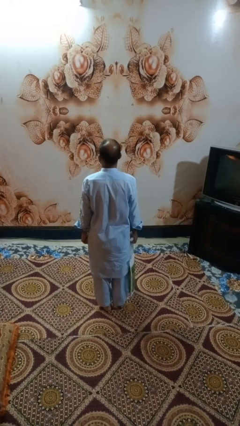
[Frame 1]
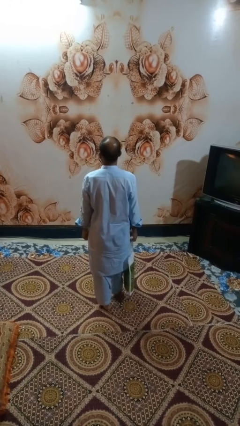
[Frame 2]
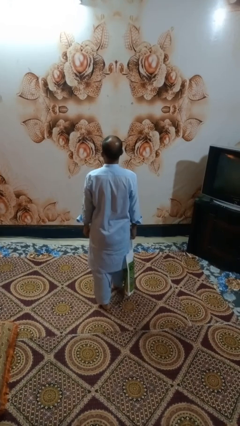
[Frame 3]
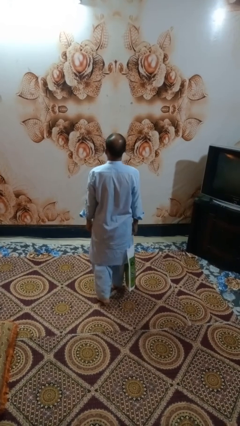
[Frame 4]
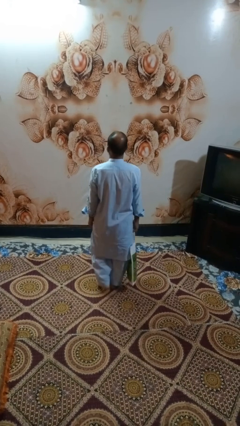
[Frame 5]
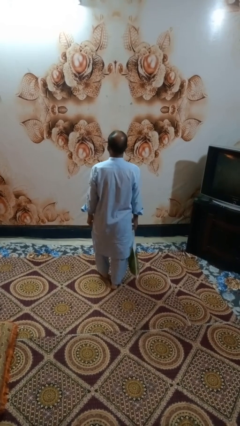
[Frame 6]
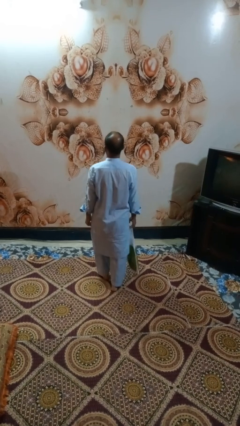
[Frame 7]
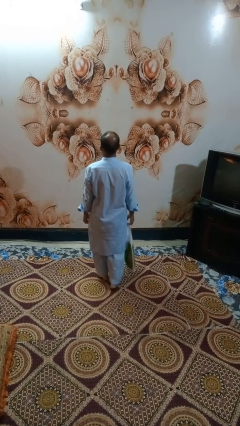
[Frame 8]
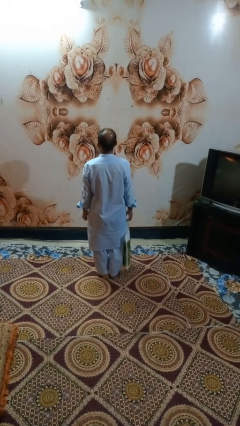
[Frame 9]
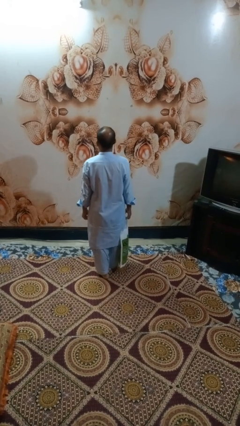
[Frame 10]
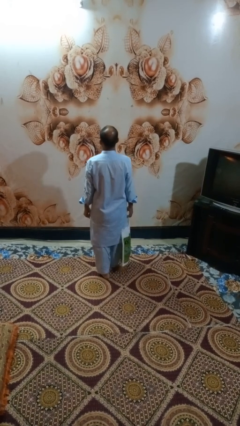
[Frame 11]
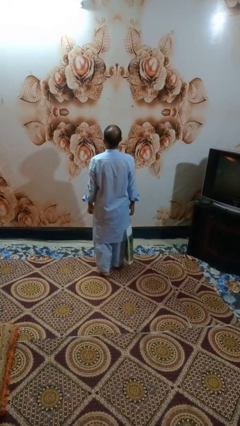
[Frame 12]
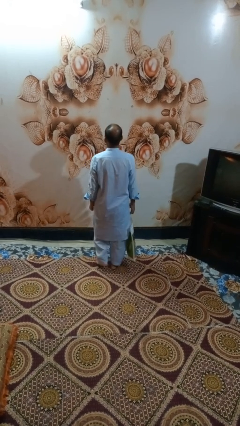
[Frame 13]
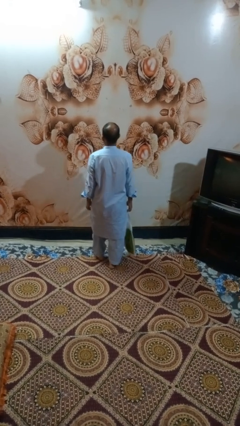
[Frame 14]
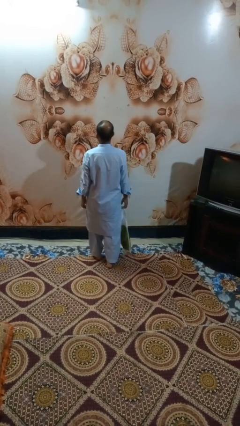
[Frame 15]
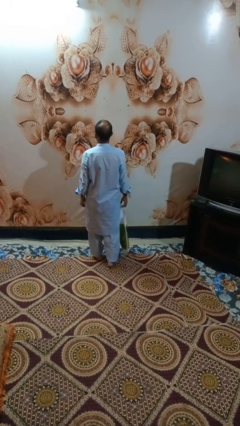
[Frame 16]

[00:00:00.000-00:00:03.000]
person carries groceries

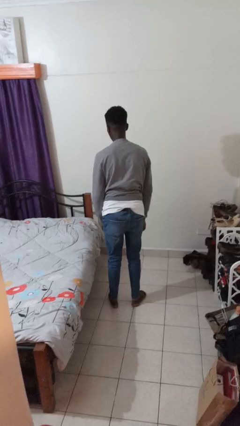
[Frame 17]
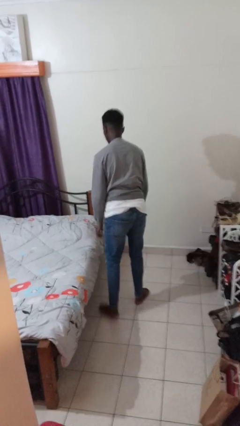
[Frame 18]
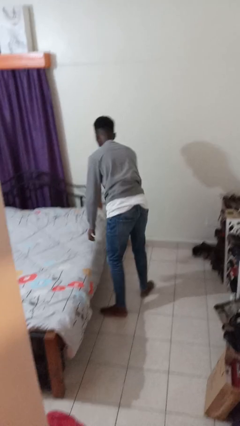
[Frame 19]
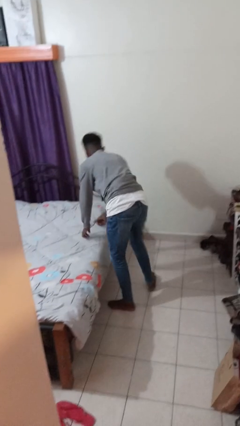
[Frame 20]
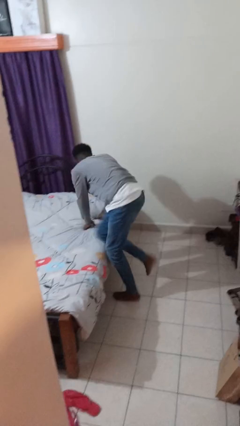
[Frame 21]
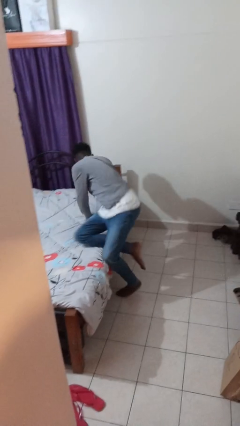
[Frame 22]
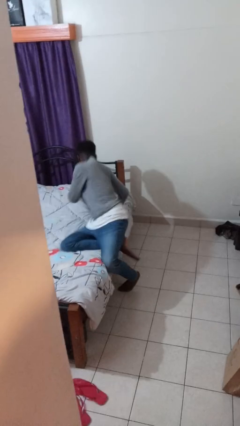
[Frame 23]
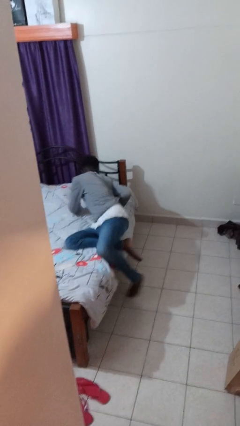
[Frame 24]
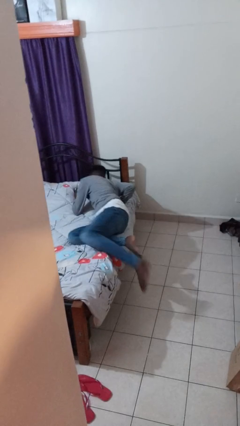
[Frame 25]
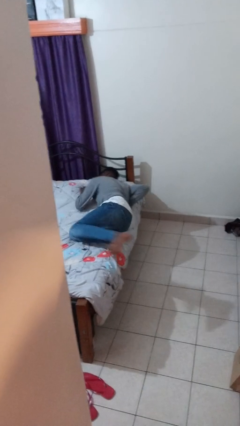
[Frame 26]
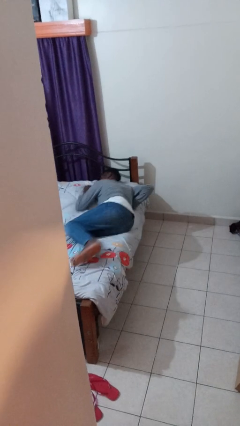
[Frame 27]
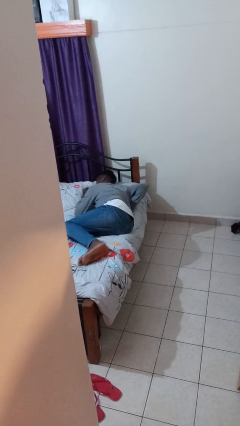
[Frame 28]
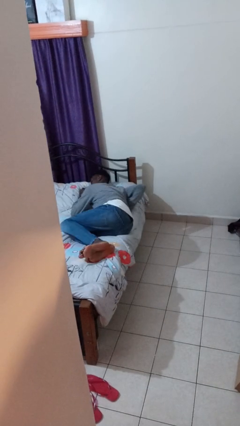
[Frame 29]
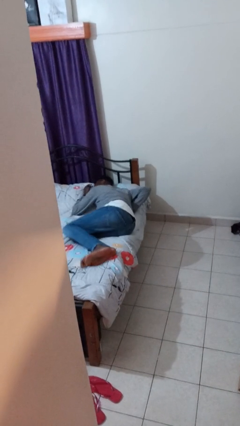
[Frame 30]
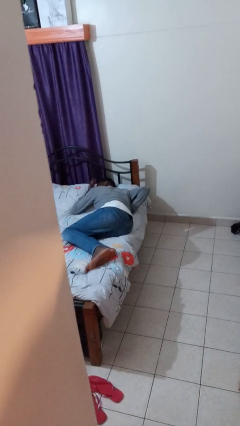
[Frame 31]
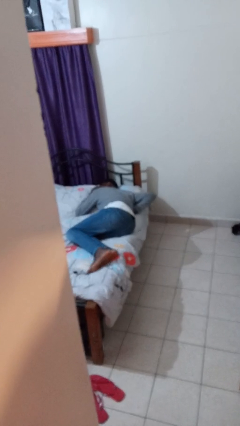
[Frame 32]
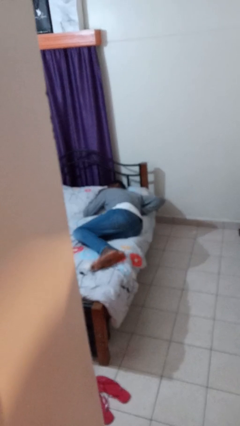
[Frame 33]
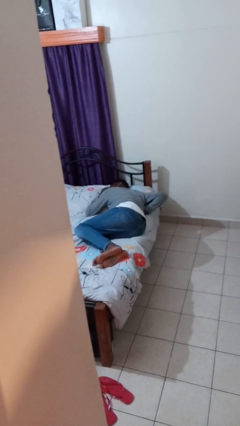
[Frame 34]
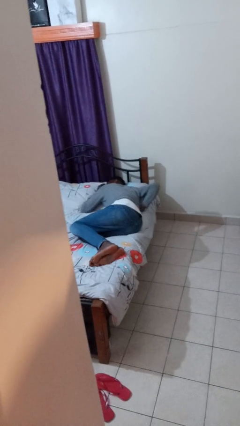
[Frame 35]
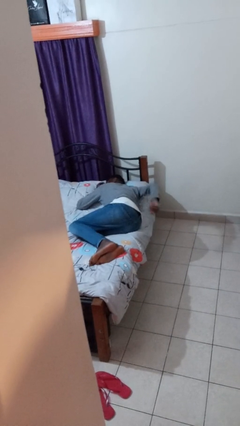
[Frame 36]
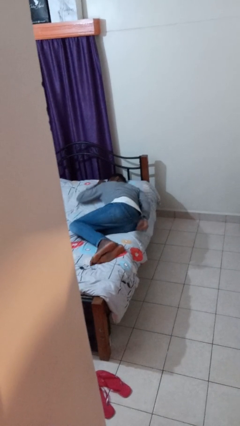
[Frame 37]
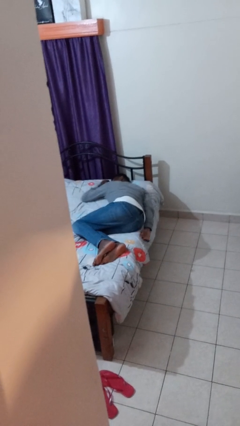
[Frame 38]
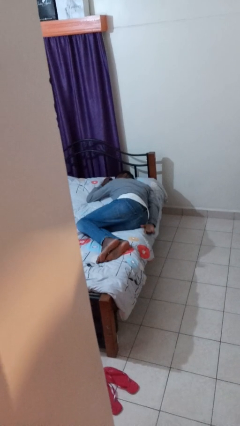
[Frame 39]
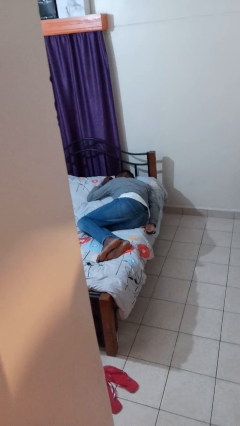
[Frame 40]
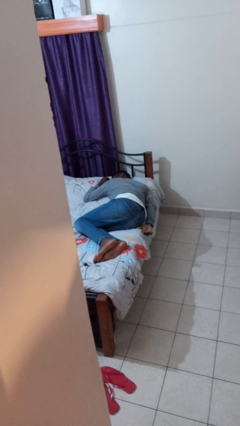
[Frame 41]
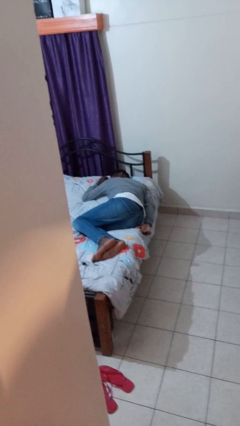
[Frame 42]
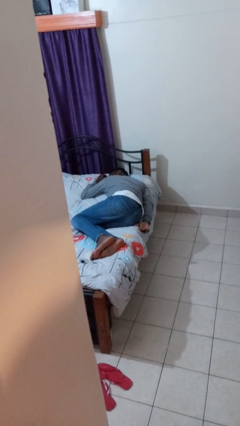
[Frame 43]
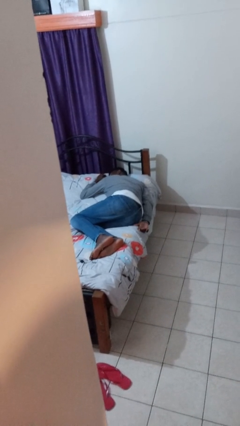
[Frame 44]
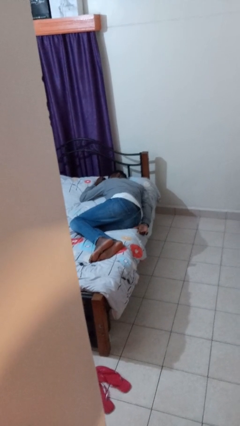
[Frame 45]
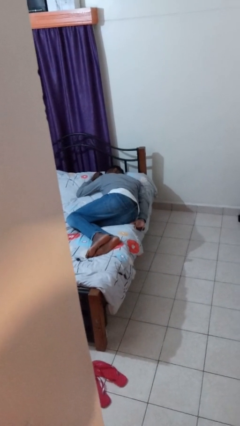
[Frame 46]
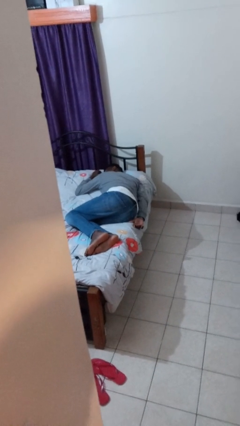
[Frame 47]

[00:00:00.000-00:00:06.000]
person lies down on bed

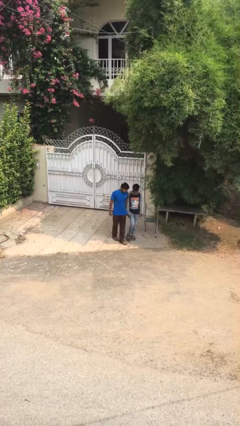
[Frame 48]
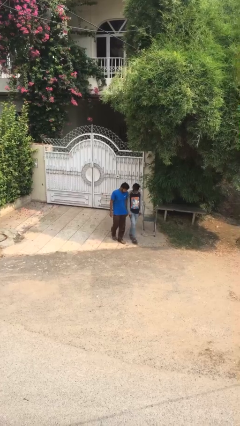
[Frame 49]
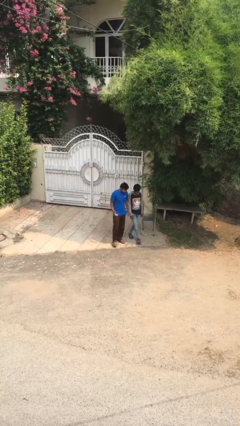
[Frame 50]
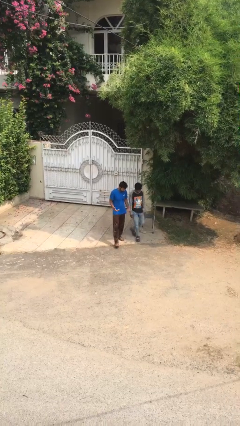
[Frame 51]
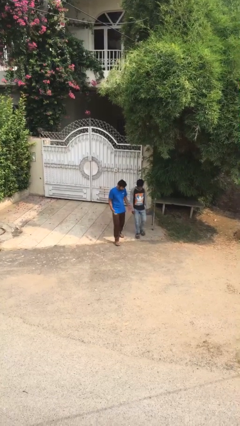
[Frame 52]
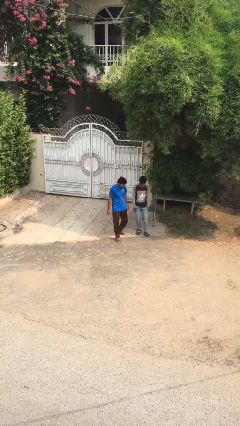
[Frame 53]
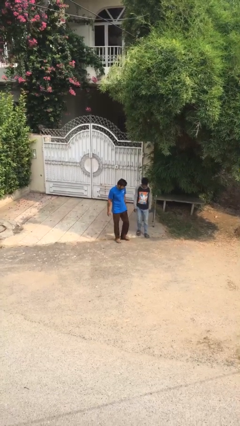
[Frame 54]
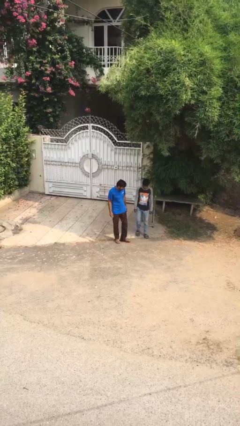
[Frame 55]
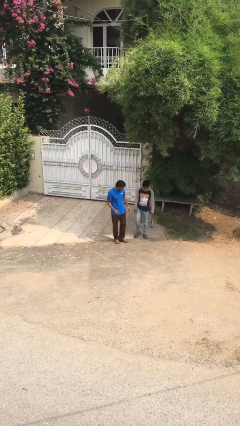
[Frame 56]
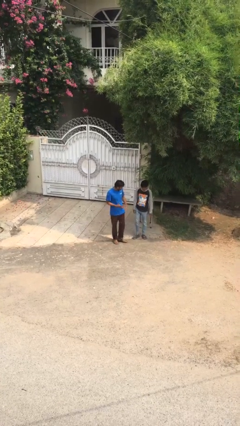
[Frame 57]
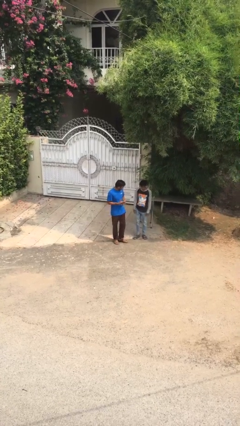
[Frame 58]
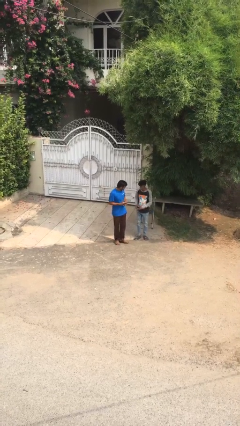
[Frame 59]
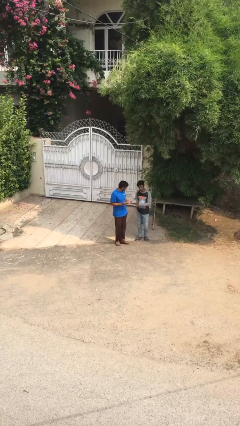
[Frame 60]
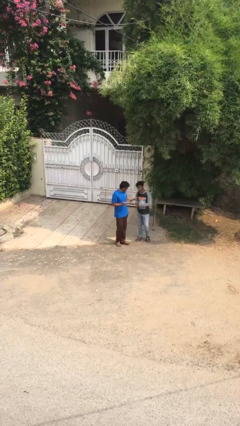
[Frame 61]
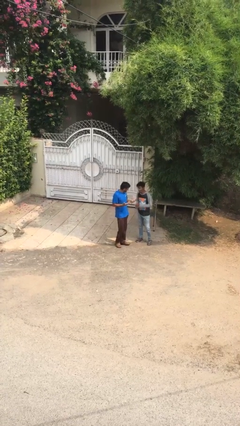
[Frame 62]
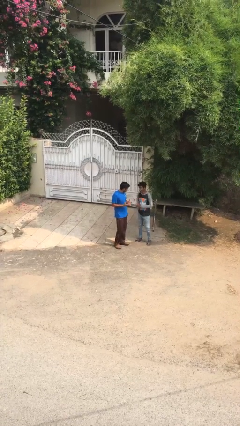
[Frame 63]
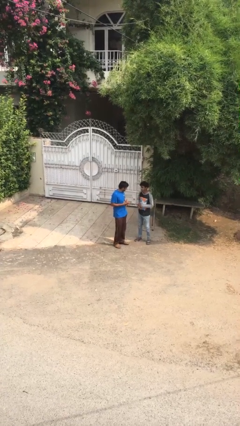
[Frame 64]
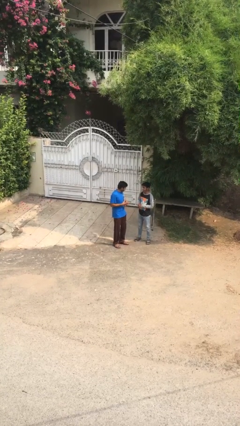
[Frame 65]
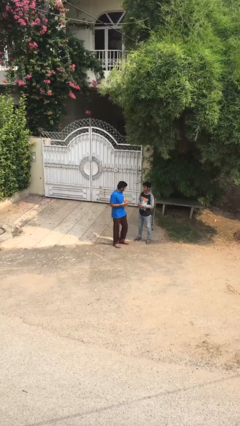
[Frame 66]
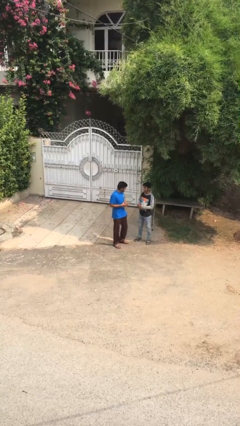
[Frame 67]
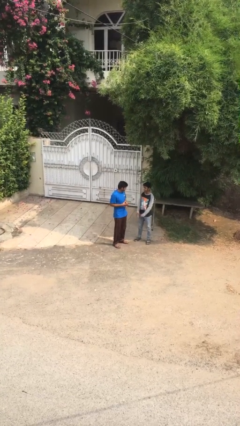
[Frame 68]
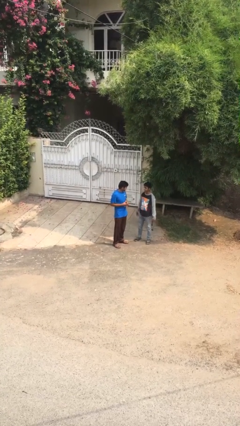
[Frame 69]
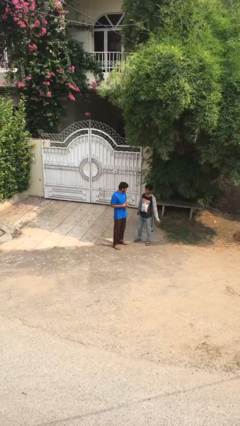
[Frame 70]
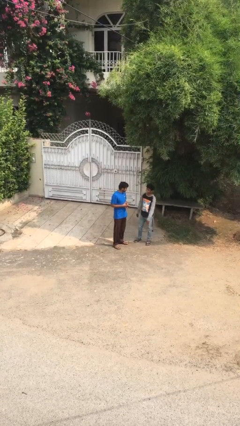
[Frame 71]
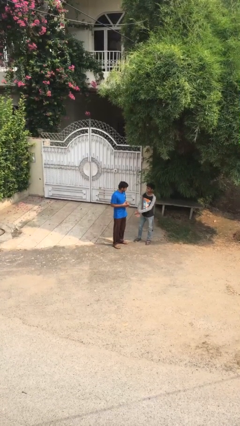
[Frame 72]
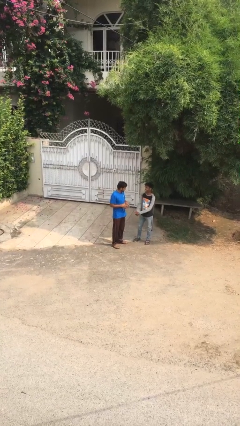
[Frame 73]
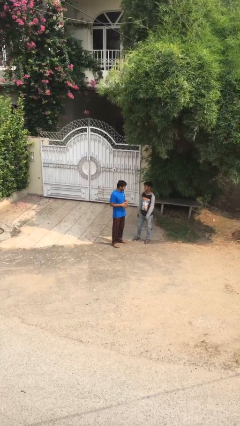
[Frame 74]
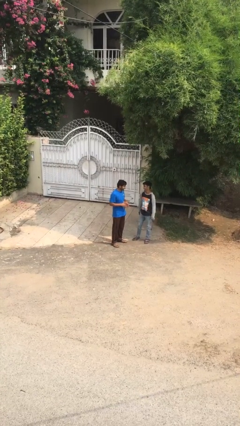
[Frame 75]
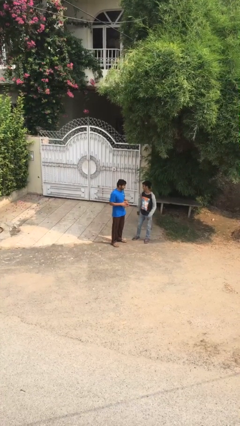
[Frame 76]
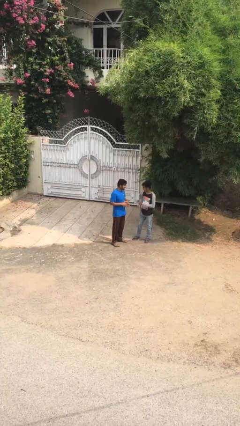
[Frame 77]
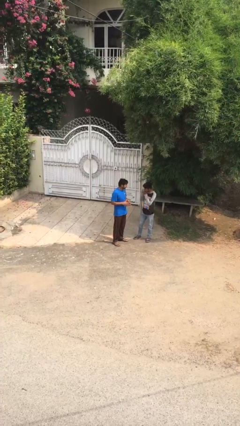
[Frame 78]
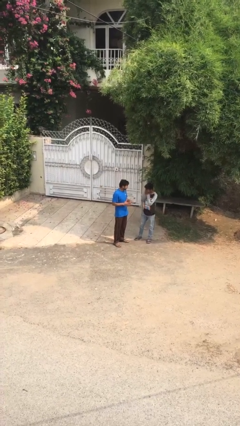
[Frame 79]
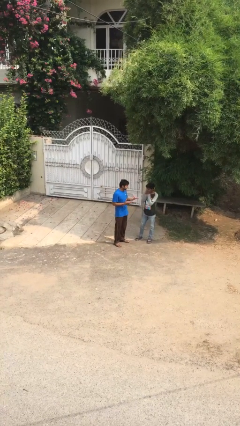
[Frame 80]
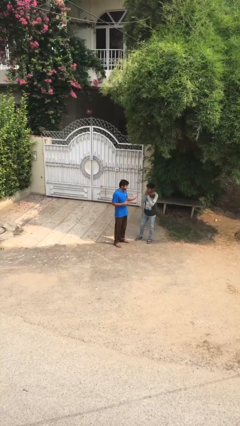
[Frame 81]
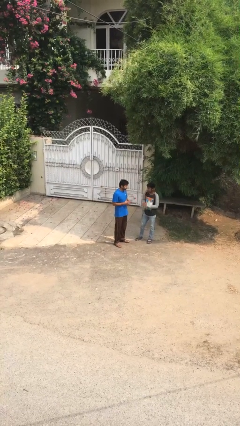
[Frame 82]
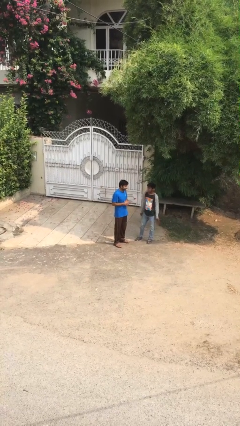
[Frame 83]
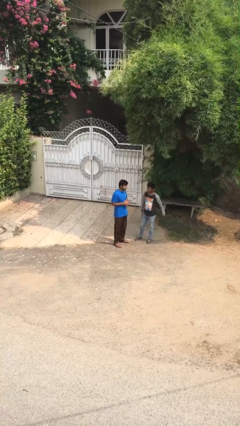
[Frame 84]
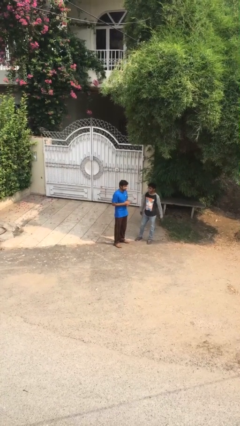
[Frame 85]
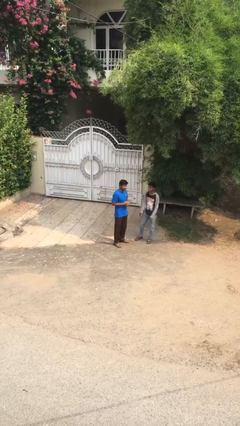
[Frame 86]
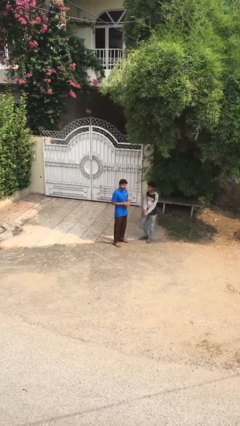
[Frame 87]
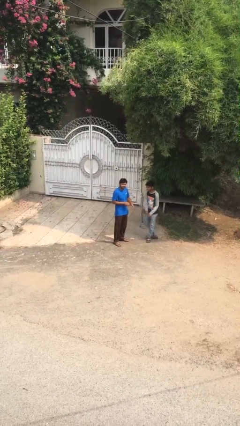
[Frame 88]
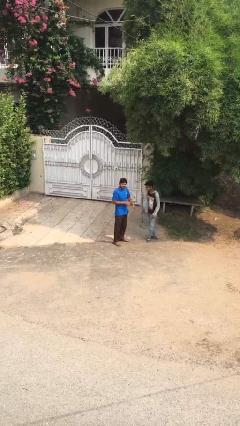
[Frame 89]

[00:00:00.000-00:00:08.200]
person talks to person

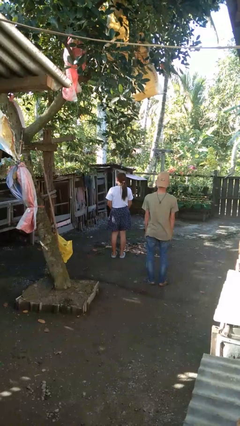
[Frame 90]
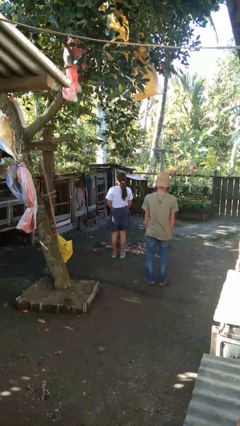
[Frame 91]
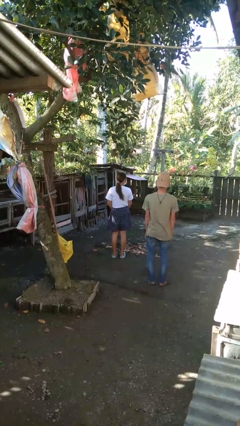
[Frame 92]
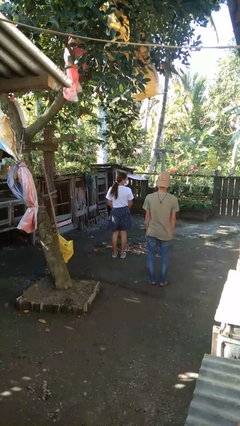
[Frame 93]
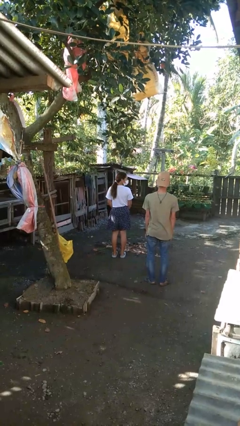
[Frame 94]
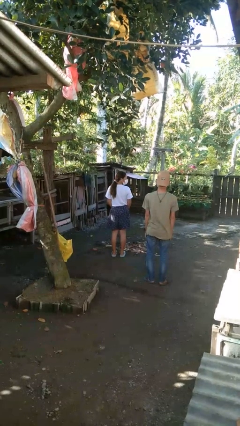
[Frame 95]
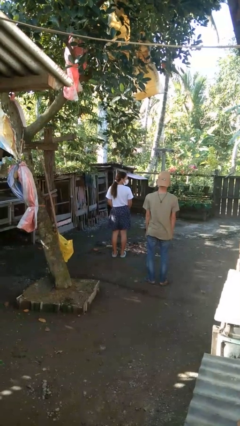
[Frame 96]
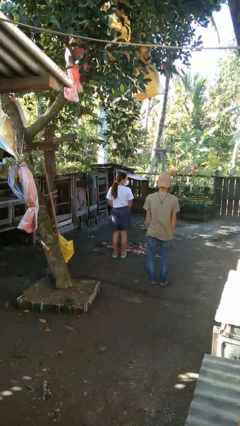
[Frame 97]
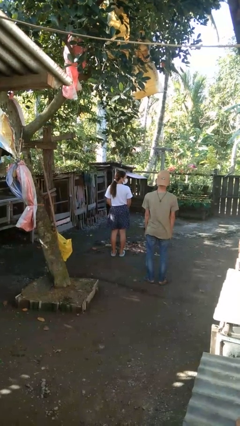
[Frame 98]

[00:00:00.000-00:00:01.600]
person looks over shoulder
